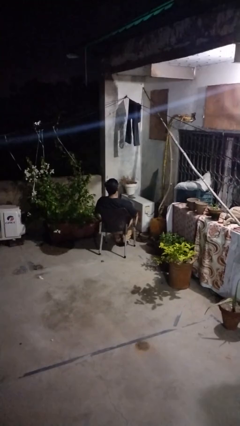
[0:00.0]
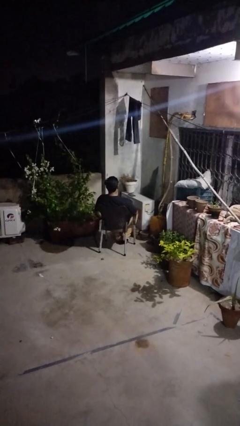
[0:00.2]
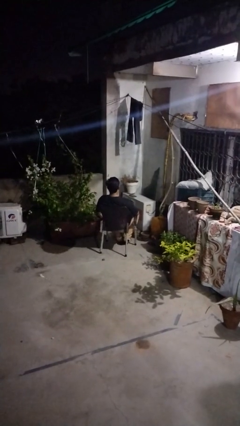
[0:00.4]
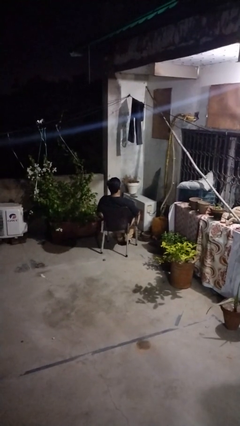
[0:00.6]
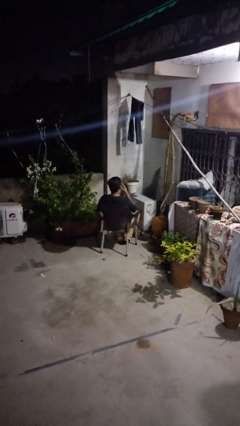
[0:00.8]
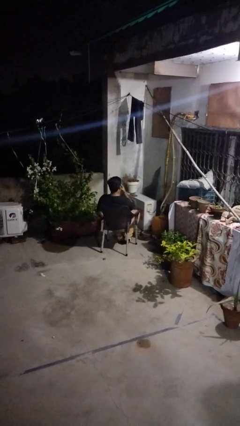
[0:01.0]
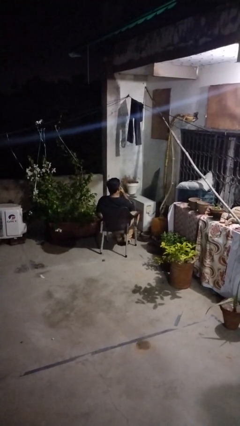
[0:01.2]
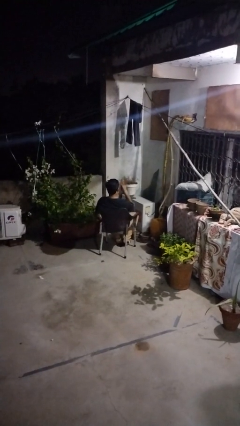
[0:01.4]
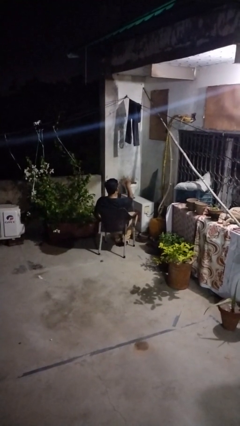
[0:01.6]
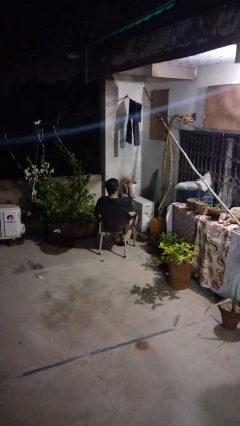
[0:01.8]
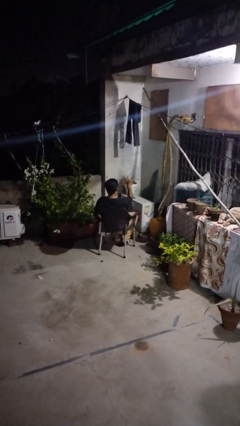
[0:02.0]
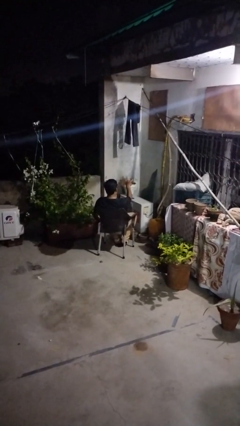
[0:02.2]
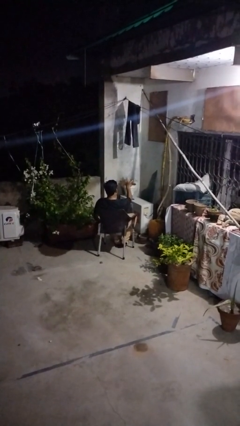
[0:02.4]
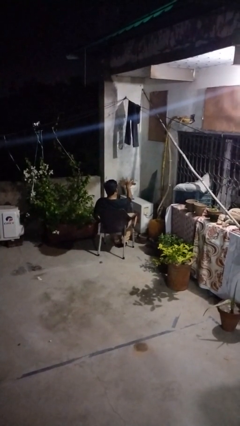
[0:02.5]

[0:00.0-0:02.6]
person gestures watch closely

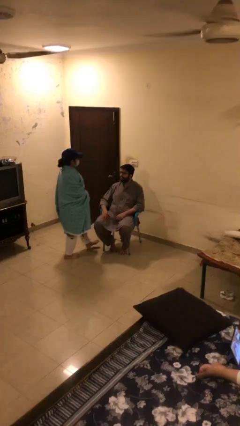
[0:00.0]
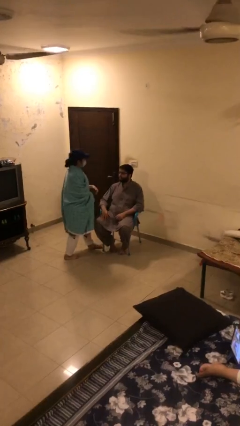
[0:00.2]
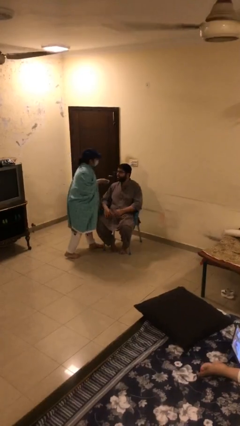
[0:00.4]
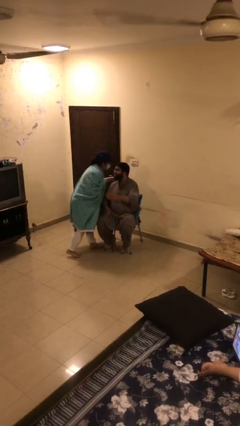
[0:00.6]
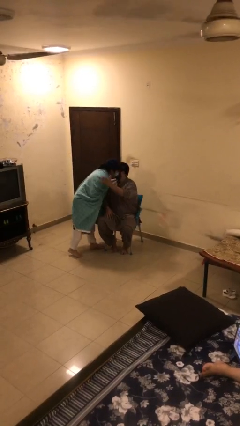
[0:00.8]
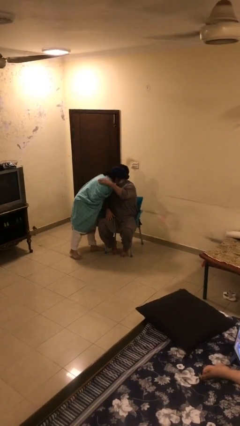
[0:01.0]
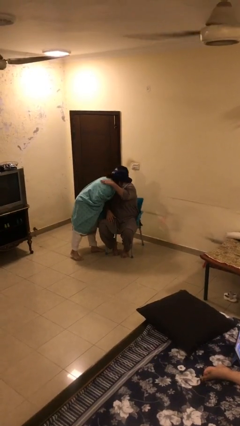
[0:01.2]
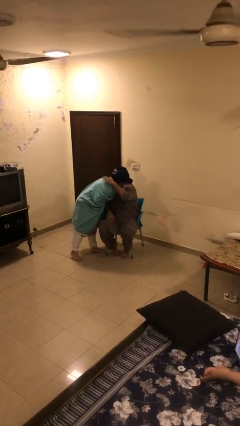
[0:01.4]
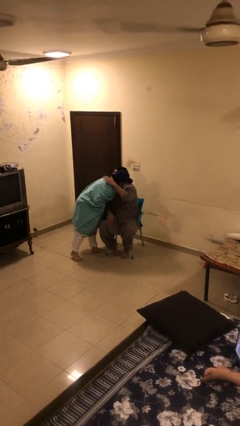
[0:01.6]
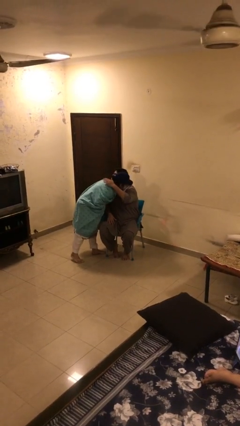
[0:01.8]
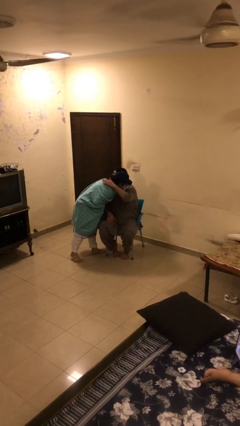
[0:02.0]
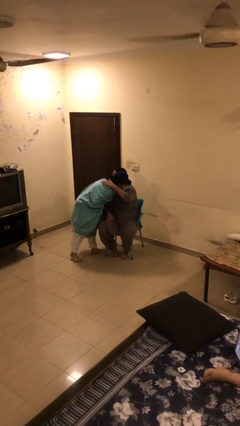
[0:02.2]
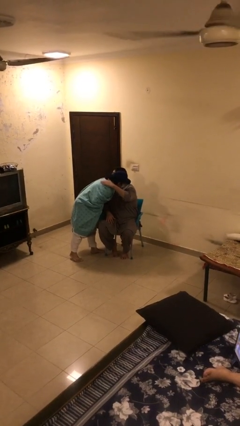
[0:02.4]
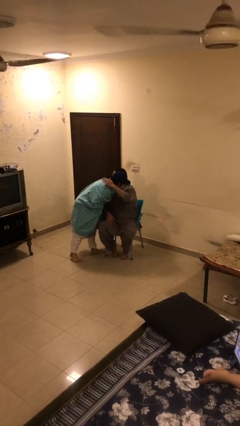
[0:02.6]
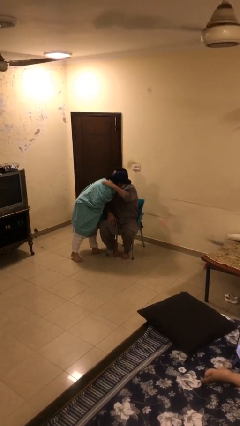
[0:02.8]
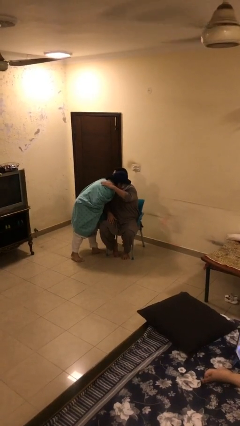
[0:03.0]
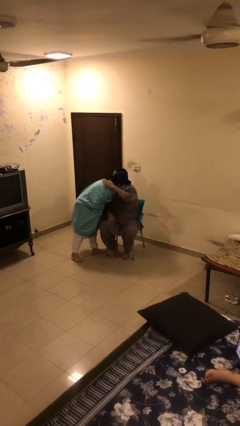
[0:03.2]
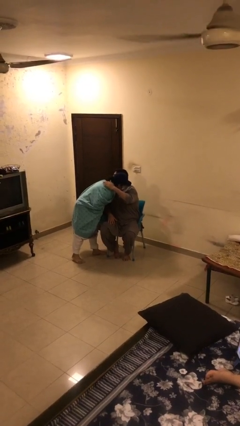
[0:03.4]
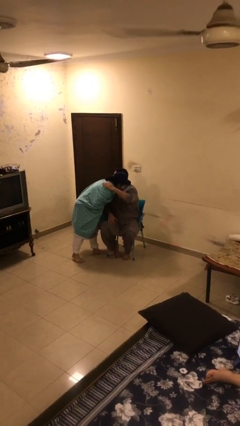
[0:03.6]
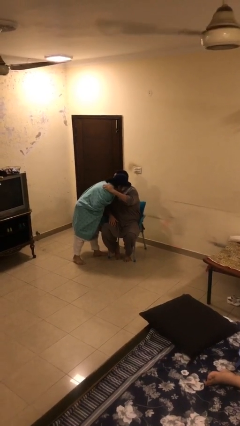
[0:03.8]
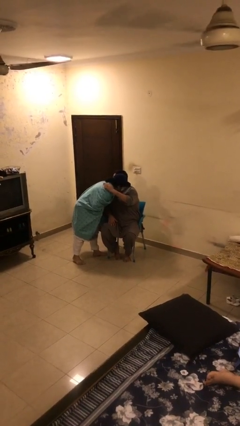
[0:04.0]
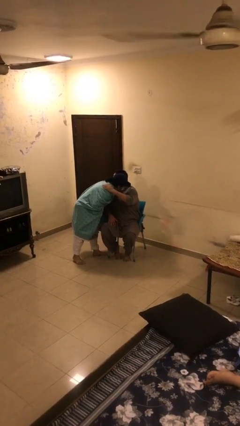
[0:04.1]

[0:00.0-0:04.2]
person embraces person

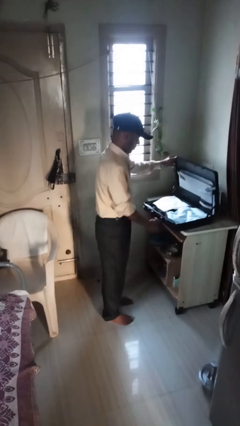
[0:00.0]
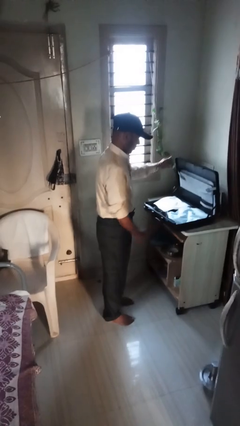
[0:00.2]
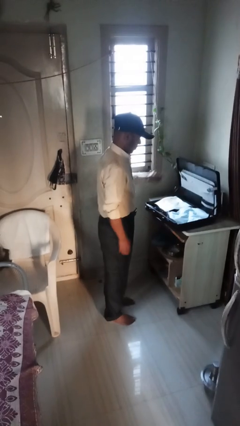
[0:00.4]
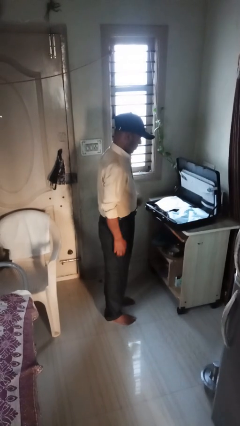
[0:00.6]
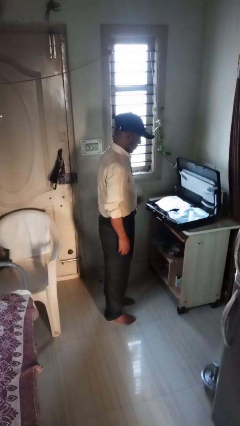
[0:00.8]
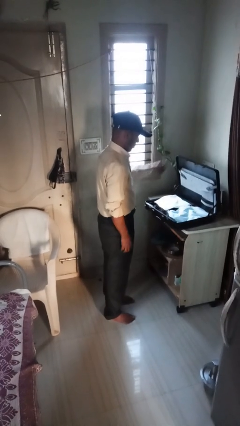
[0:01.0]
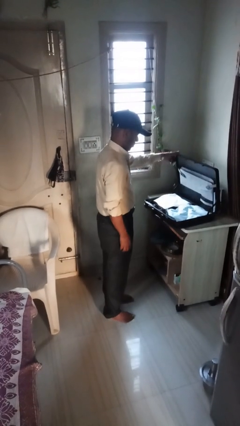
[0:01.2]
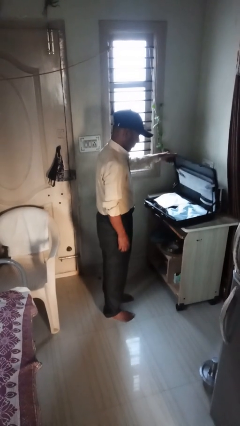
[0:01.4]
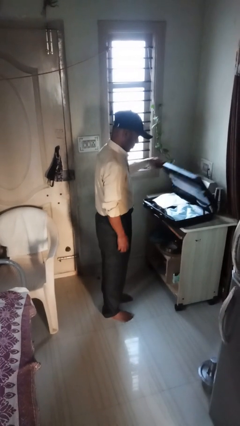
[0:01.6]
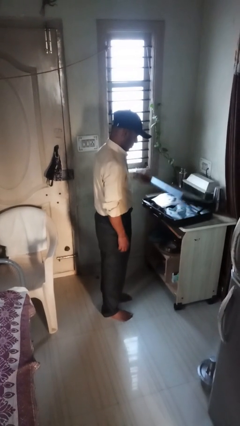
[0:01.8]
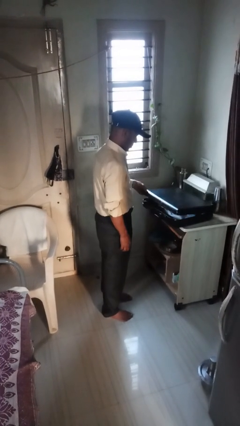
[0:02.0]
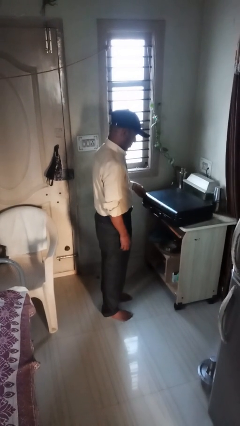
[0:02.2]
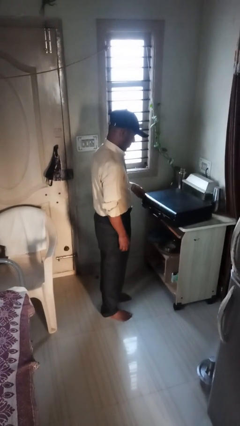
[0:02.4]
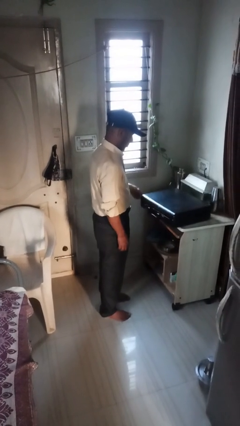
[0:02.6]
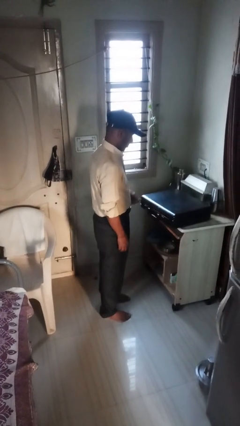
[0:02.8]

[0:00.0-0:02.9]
person closes suitcase

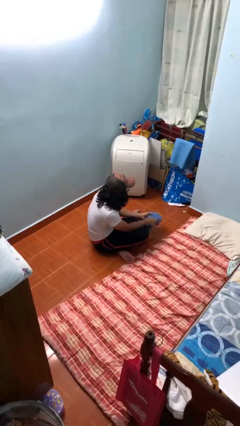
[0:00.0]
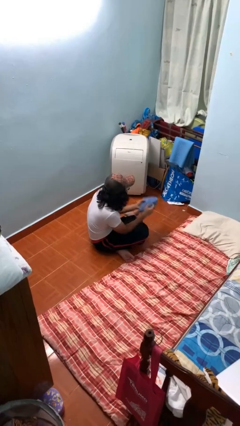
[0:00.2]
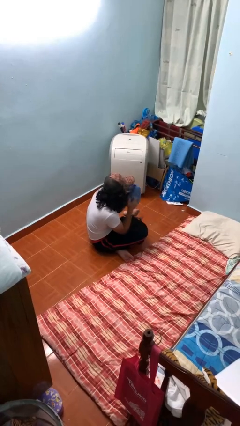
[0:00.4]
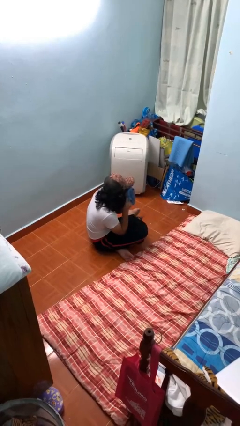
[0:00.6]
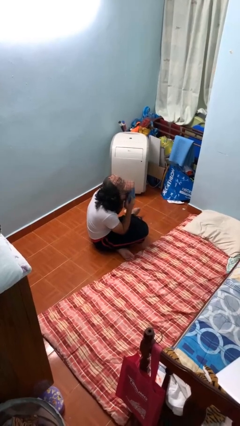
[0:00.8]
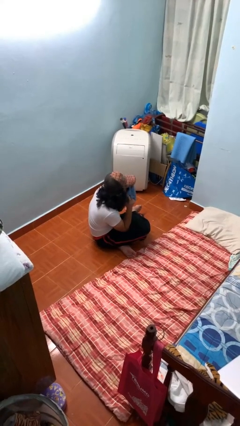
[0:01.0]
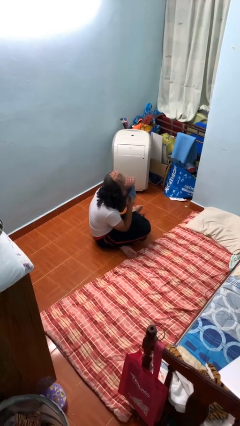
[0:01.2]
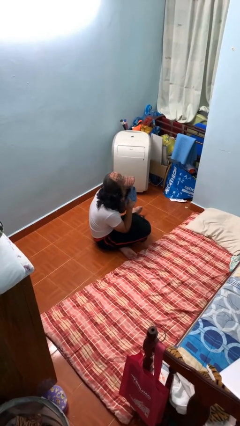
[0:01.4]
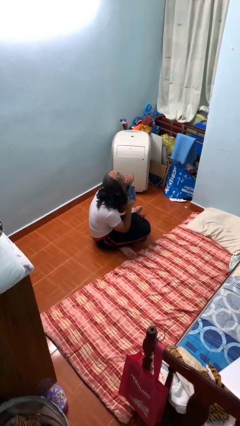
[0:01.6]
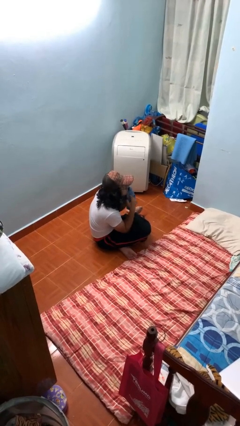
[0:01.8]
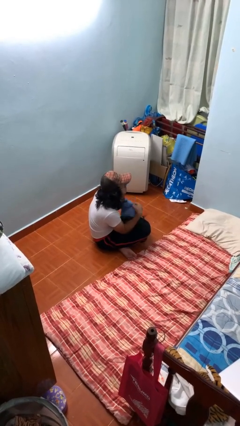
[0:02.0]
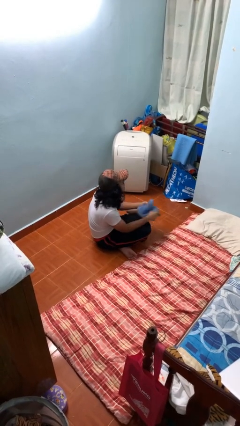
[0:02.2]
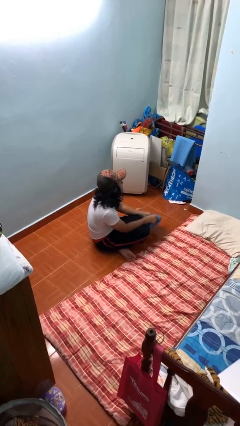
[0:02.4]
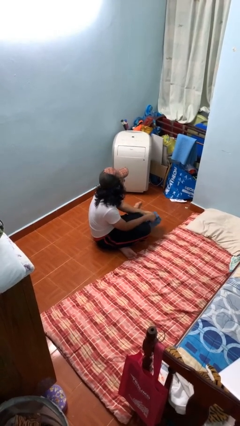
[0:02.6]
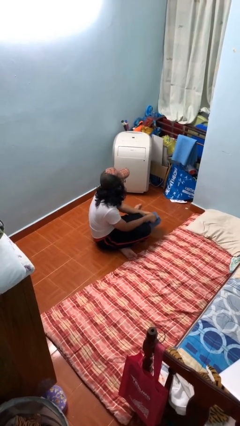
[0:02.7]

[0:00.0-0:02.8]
person wipes mouth with napkin

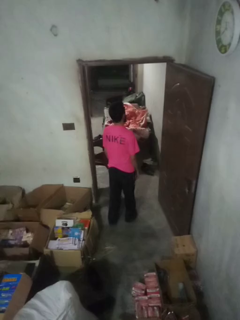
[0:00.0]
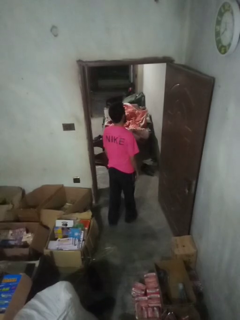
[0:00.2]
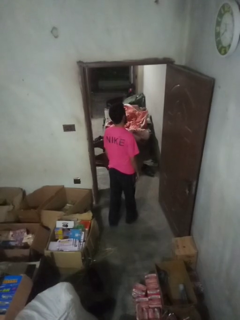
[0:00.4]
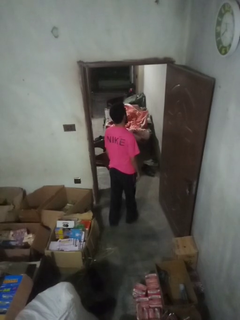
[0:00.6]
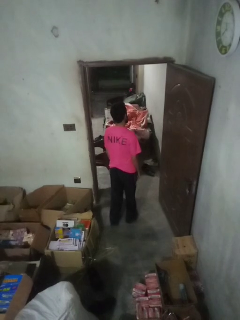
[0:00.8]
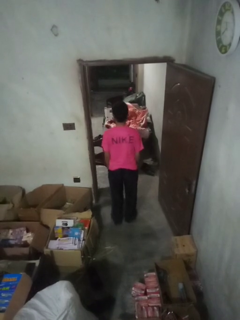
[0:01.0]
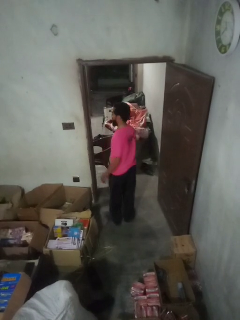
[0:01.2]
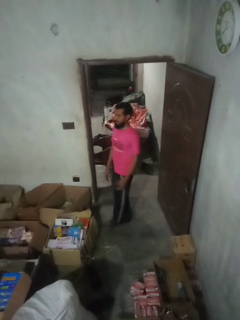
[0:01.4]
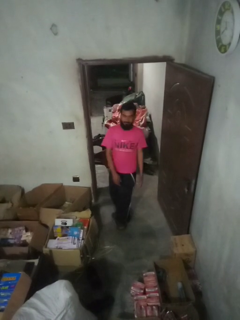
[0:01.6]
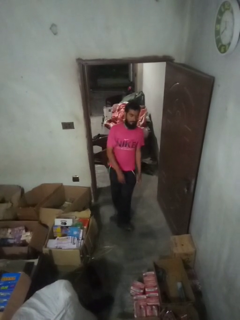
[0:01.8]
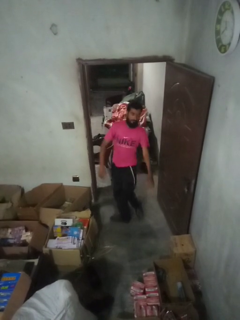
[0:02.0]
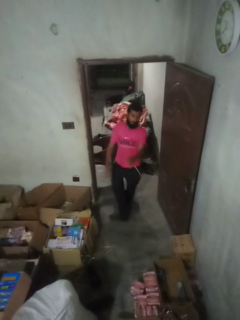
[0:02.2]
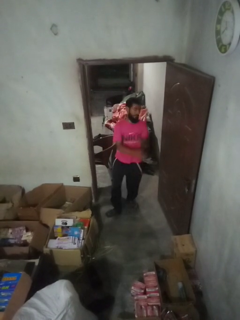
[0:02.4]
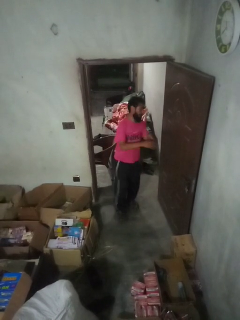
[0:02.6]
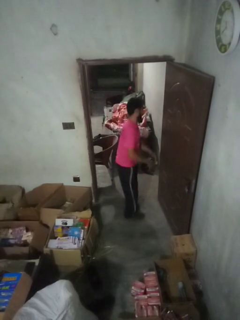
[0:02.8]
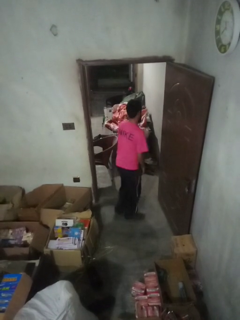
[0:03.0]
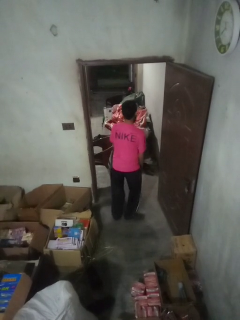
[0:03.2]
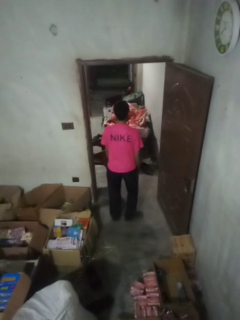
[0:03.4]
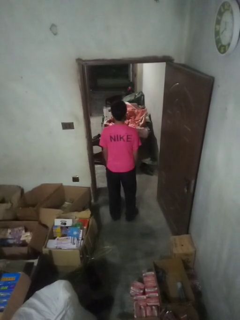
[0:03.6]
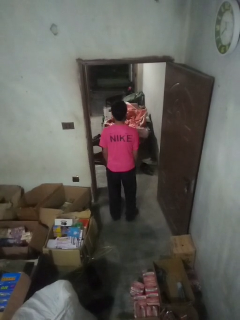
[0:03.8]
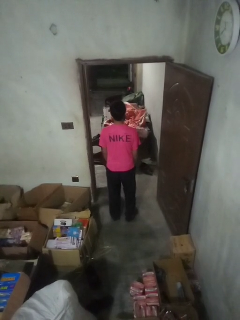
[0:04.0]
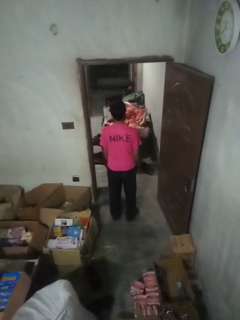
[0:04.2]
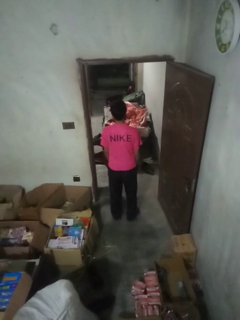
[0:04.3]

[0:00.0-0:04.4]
person twirls

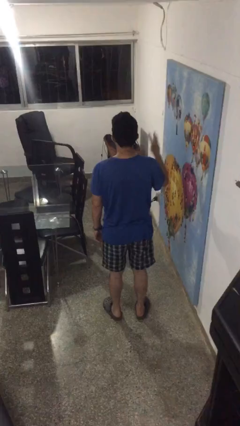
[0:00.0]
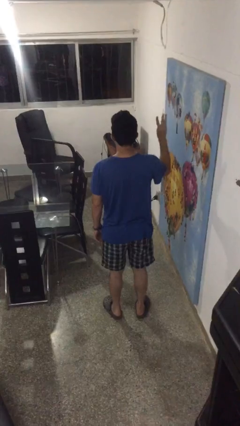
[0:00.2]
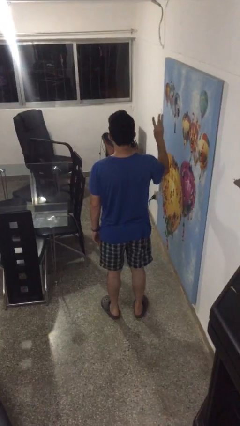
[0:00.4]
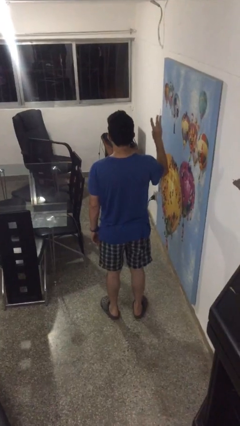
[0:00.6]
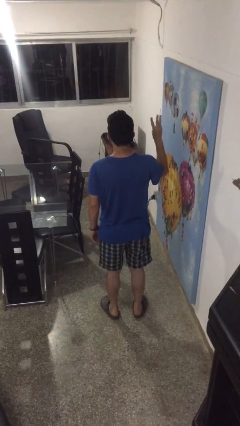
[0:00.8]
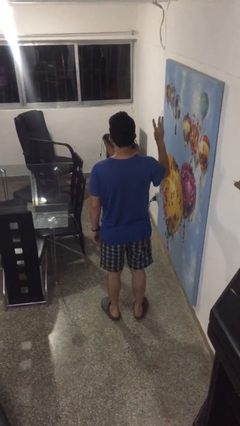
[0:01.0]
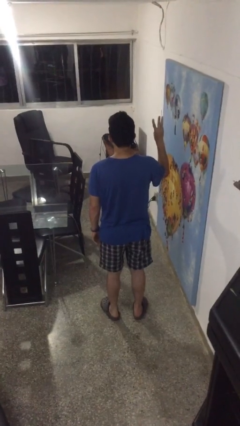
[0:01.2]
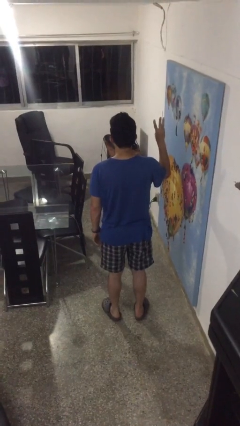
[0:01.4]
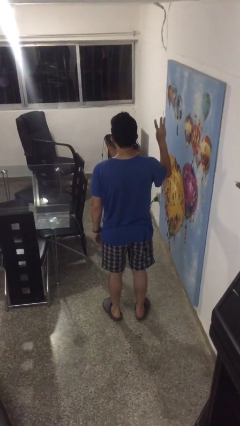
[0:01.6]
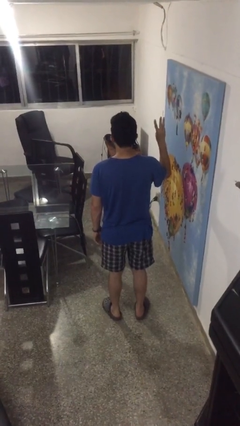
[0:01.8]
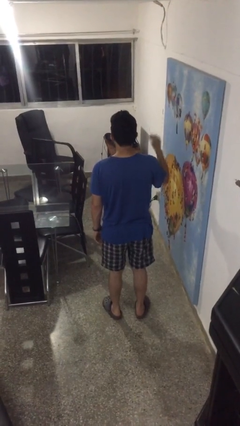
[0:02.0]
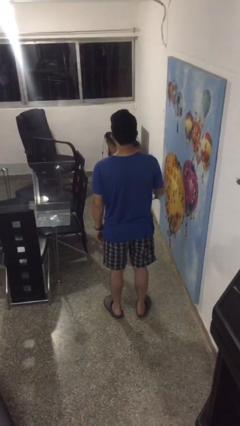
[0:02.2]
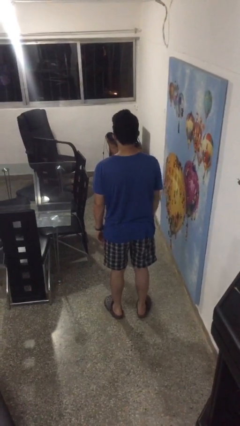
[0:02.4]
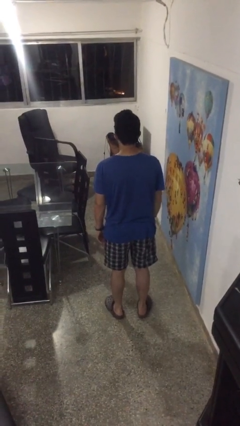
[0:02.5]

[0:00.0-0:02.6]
person gestures number three
